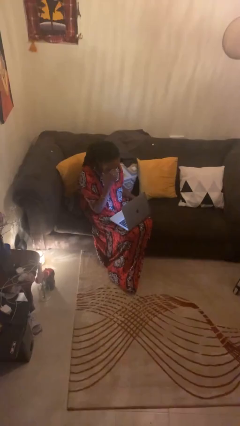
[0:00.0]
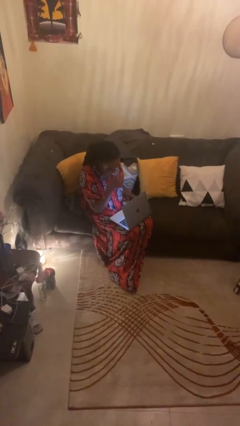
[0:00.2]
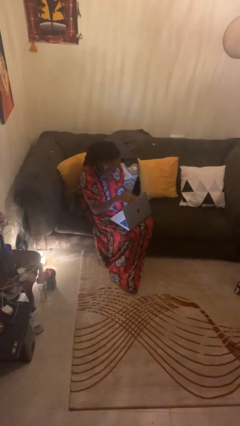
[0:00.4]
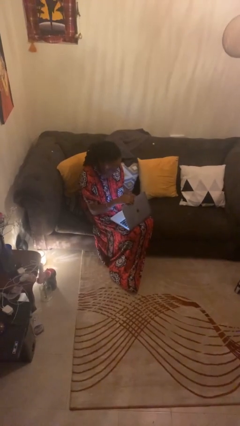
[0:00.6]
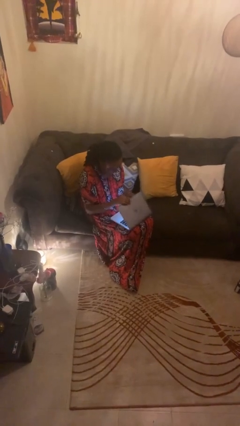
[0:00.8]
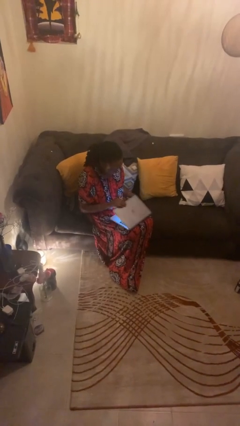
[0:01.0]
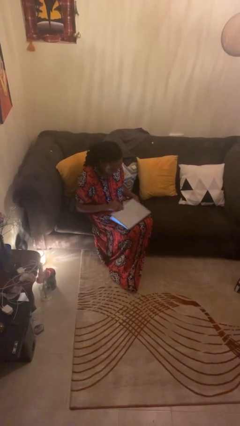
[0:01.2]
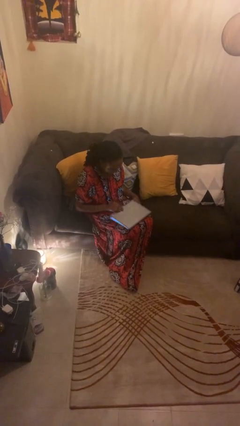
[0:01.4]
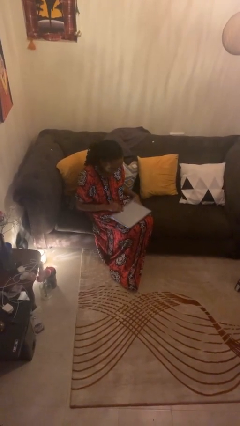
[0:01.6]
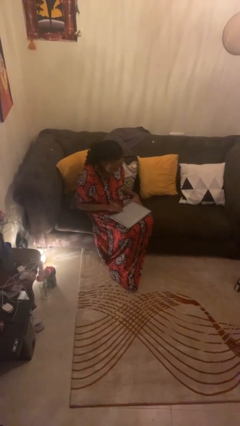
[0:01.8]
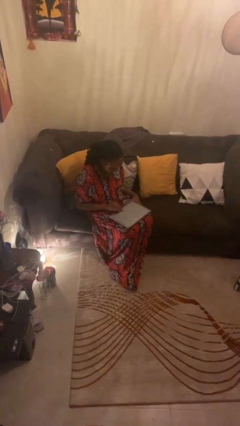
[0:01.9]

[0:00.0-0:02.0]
person closes laptop

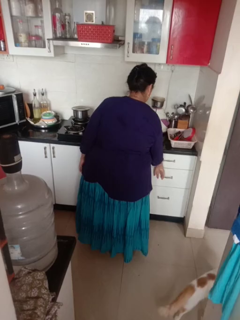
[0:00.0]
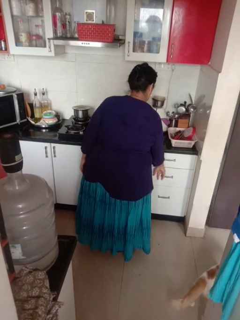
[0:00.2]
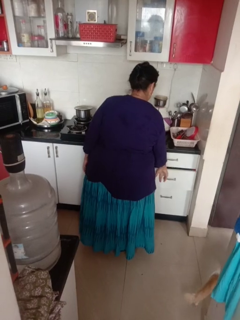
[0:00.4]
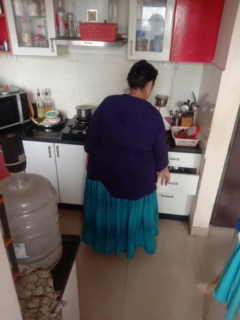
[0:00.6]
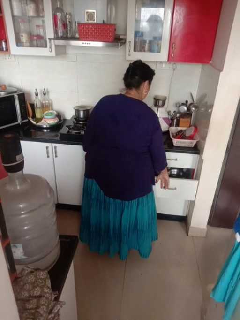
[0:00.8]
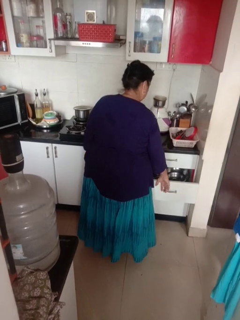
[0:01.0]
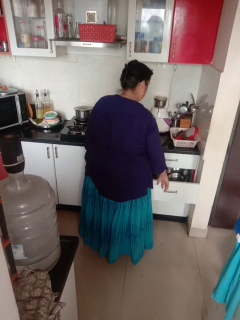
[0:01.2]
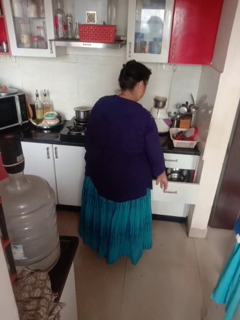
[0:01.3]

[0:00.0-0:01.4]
person opens kitchen drawer

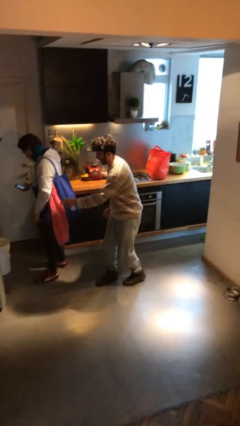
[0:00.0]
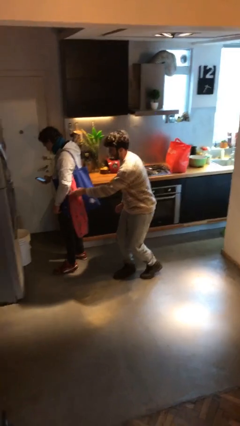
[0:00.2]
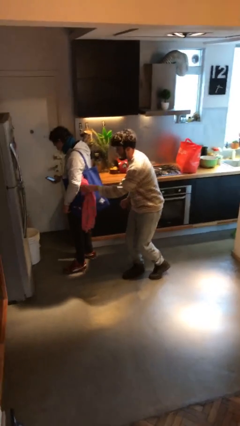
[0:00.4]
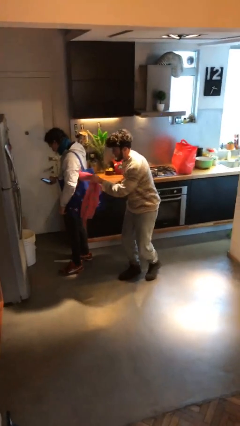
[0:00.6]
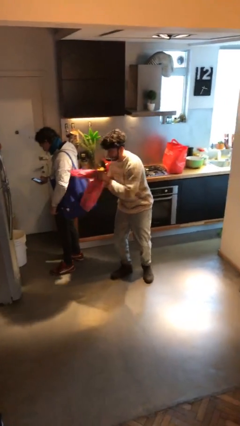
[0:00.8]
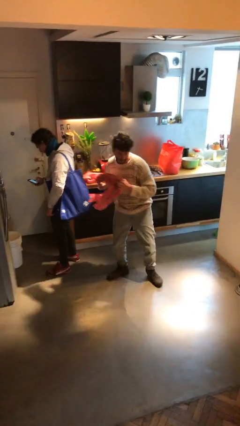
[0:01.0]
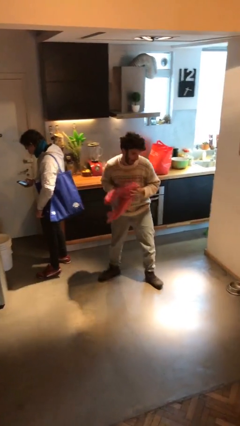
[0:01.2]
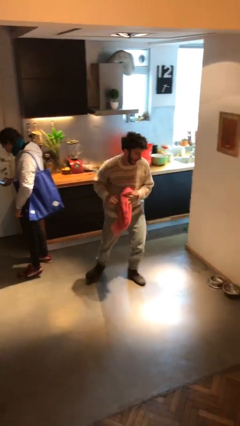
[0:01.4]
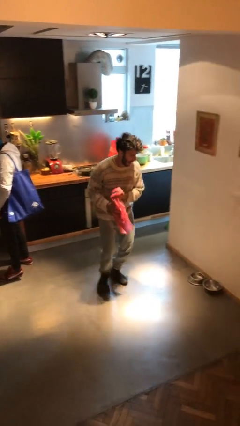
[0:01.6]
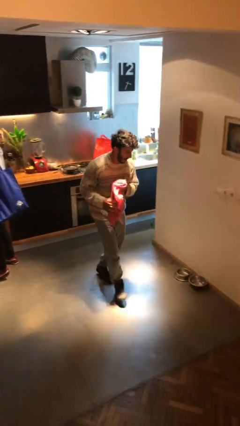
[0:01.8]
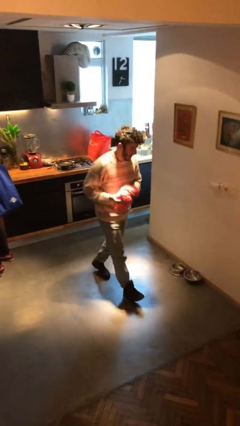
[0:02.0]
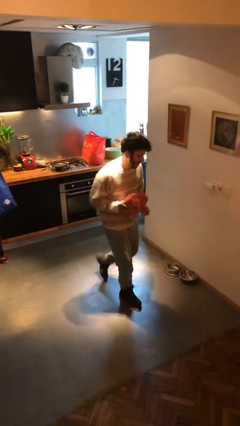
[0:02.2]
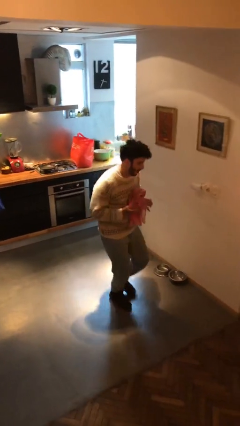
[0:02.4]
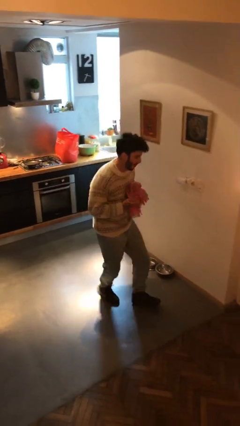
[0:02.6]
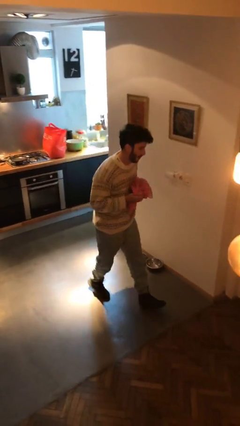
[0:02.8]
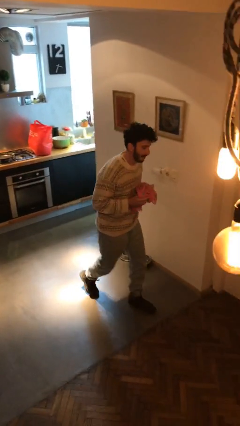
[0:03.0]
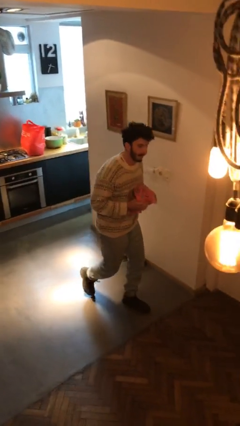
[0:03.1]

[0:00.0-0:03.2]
person steals object from person

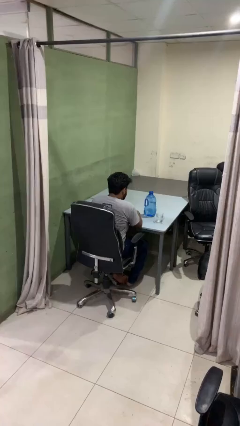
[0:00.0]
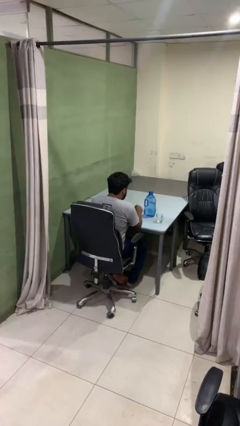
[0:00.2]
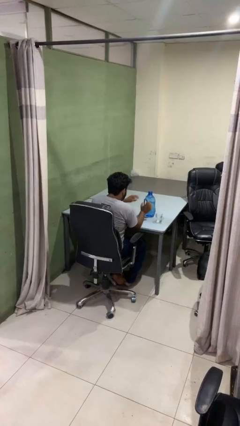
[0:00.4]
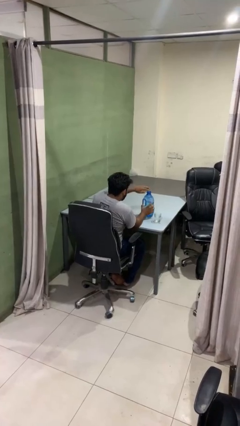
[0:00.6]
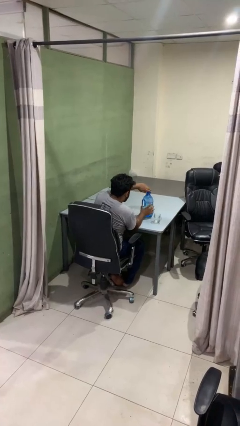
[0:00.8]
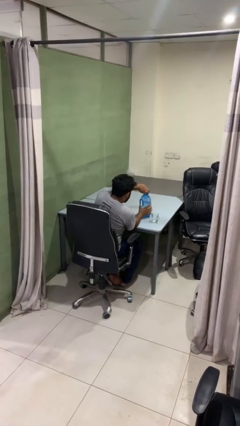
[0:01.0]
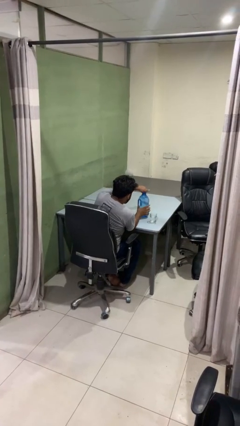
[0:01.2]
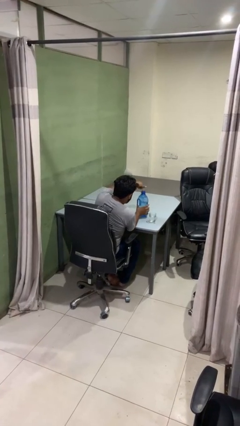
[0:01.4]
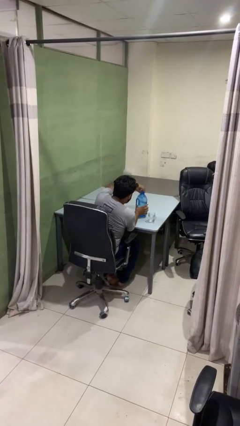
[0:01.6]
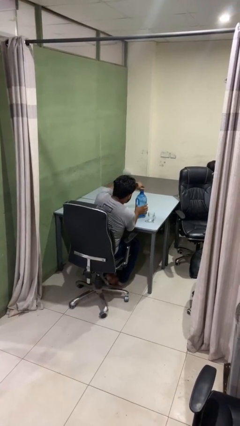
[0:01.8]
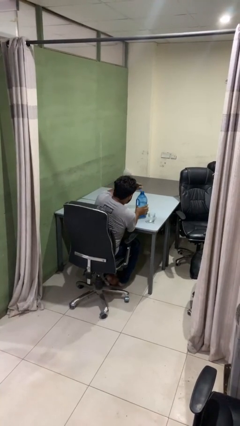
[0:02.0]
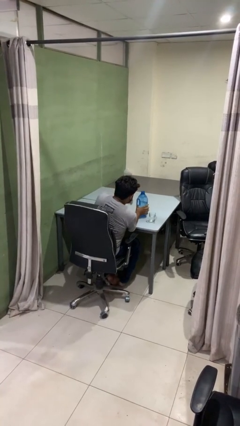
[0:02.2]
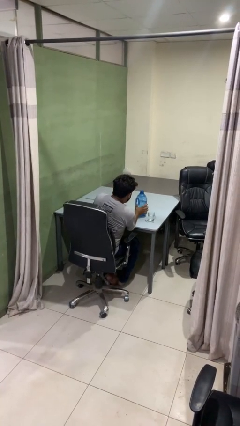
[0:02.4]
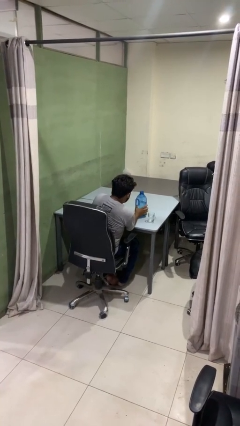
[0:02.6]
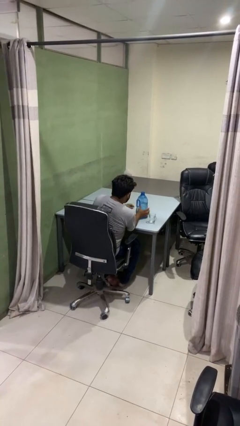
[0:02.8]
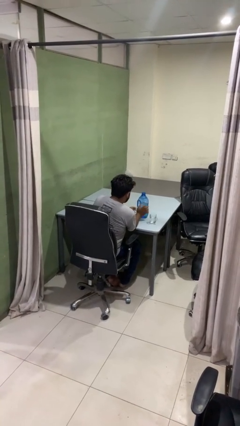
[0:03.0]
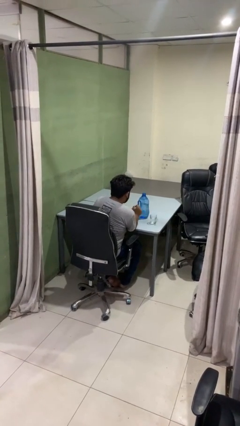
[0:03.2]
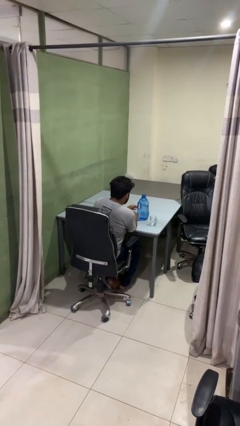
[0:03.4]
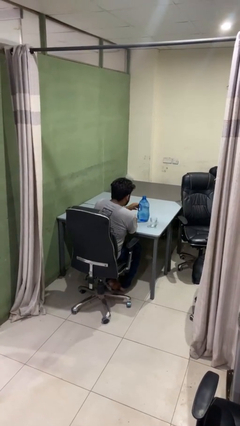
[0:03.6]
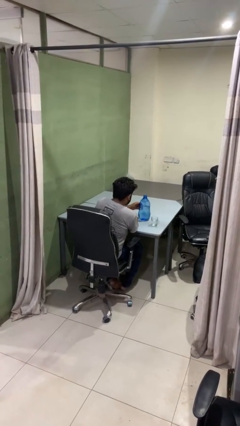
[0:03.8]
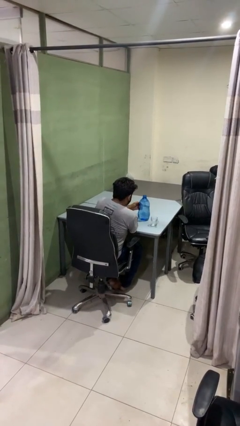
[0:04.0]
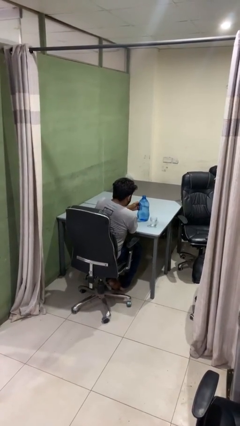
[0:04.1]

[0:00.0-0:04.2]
person unscrews lid from bottle

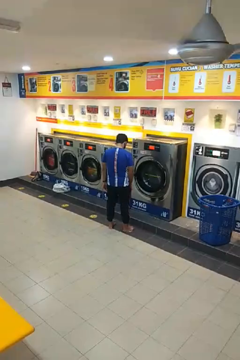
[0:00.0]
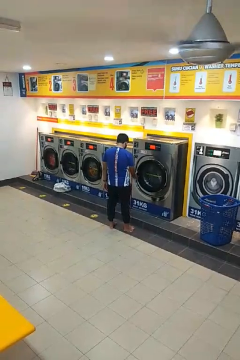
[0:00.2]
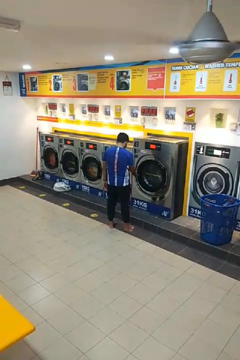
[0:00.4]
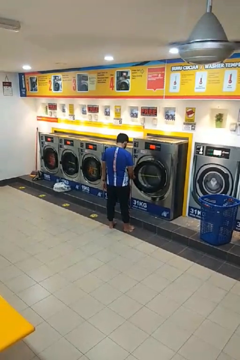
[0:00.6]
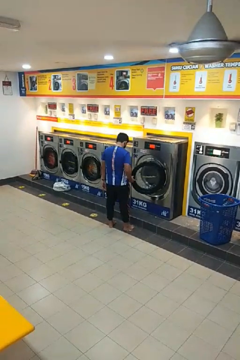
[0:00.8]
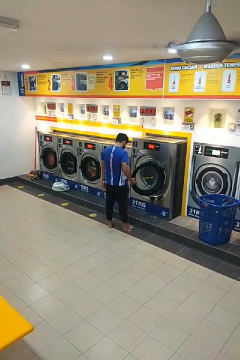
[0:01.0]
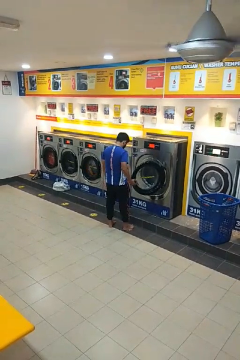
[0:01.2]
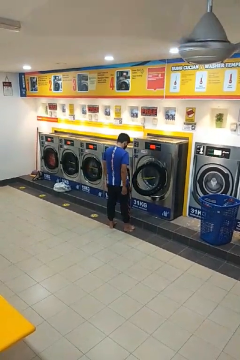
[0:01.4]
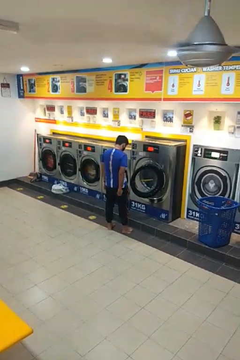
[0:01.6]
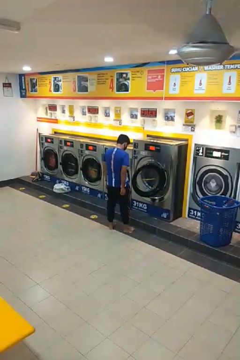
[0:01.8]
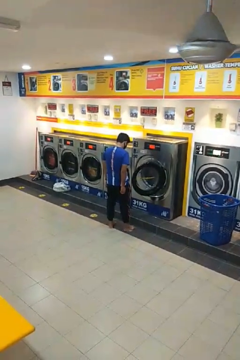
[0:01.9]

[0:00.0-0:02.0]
person opens clothes washer

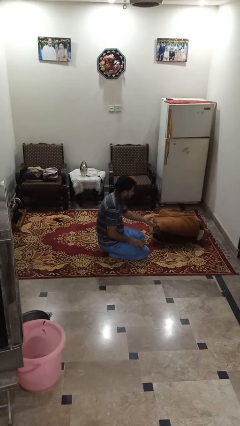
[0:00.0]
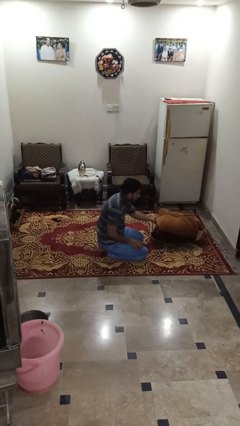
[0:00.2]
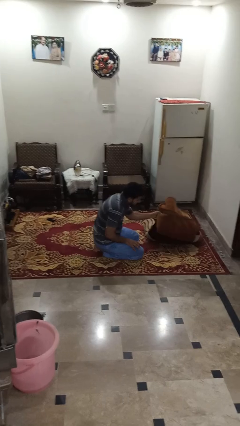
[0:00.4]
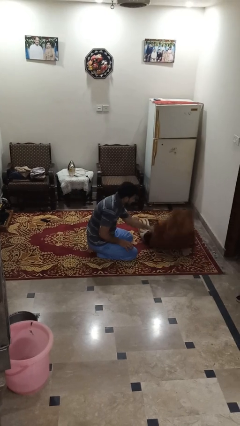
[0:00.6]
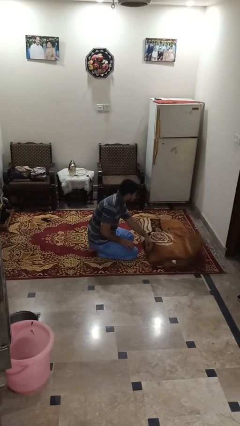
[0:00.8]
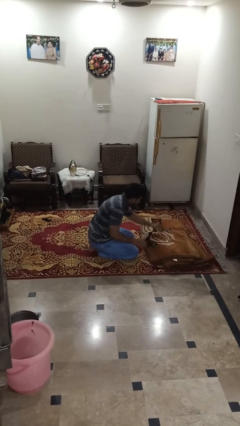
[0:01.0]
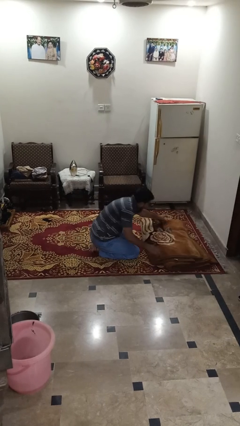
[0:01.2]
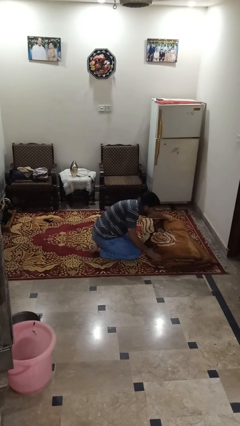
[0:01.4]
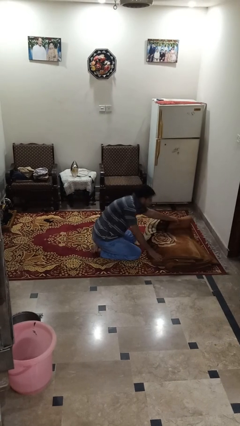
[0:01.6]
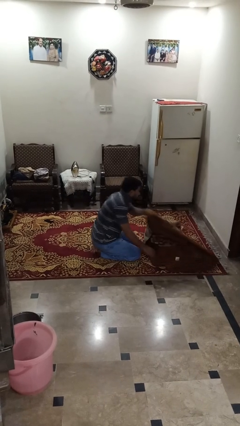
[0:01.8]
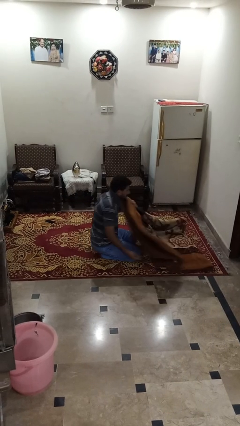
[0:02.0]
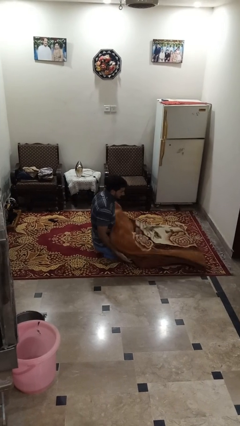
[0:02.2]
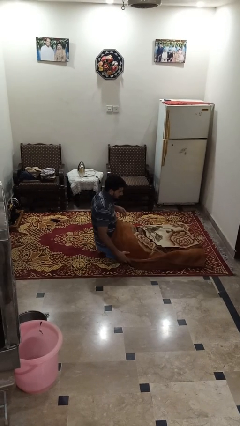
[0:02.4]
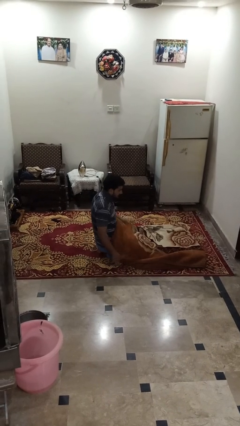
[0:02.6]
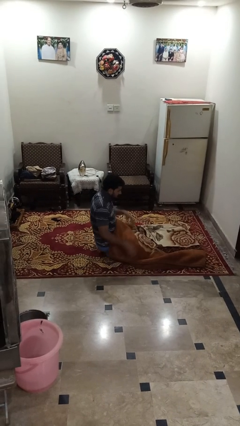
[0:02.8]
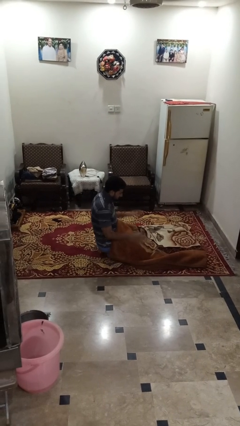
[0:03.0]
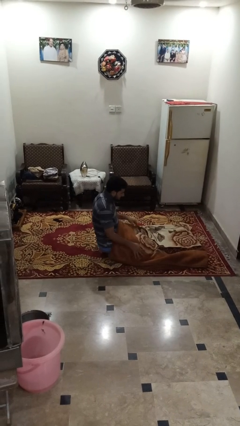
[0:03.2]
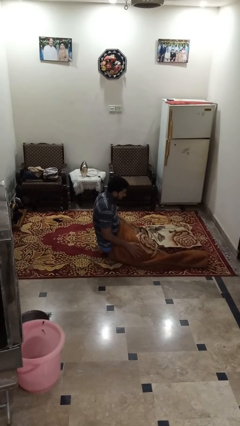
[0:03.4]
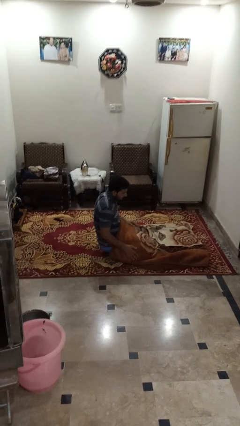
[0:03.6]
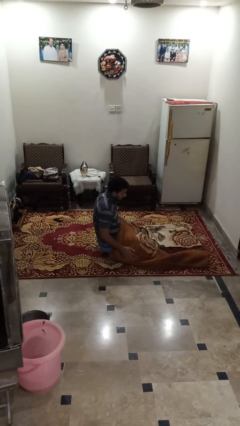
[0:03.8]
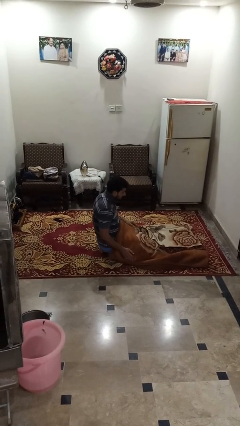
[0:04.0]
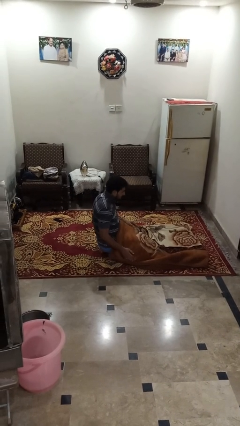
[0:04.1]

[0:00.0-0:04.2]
person unfolds blanket

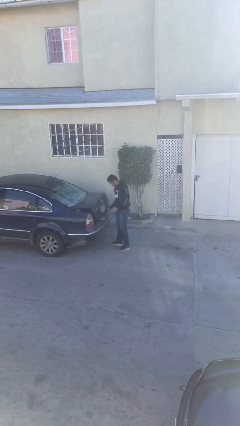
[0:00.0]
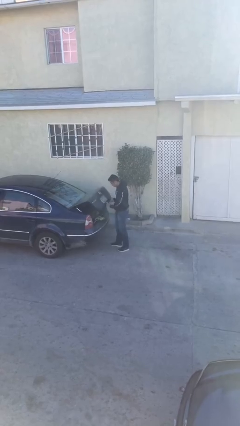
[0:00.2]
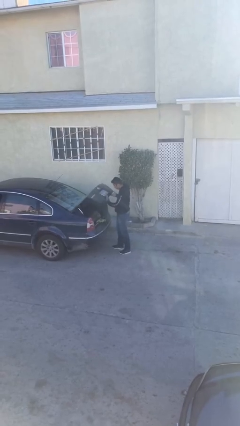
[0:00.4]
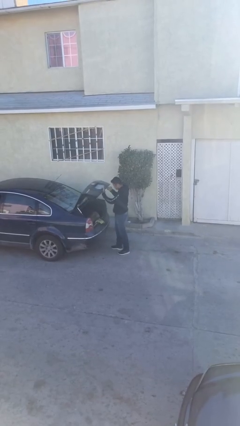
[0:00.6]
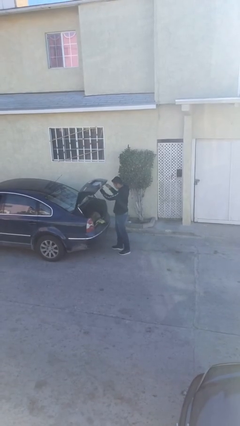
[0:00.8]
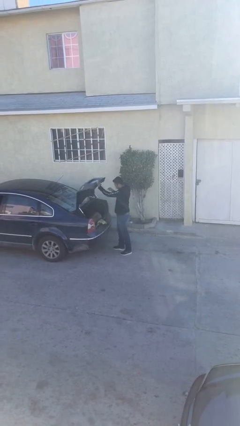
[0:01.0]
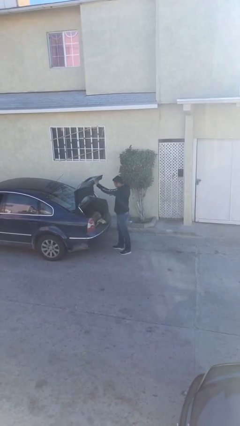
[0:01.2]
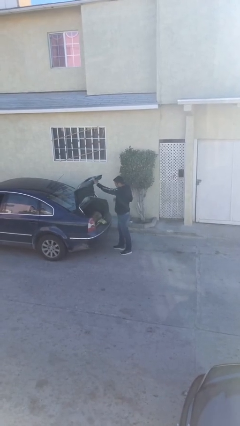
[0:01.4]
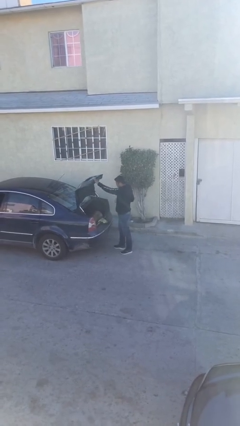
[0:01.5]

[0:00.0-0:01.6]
person opens car trunk
